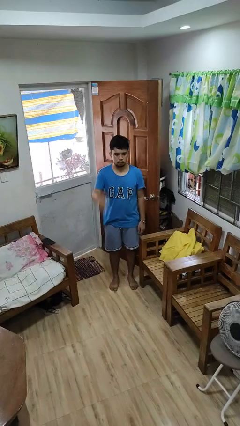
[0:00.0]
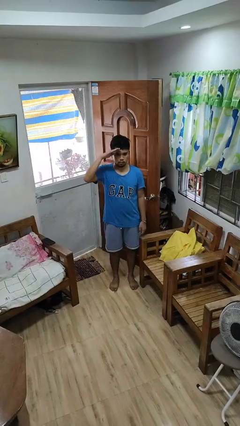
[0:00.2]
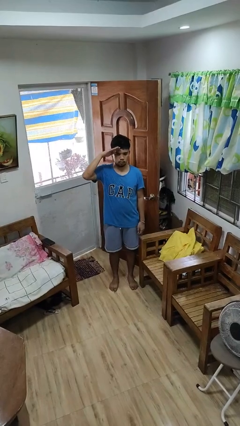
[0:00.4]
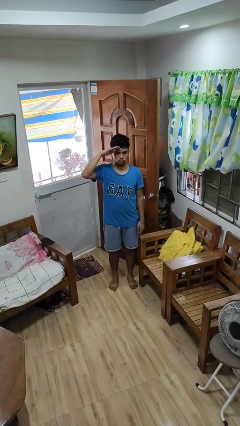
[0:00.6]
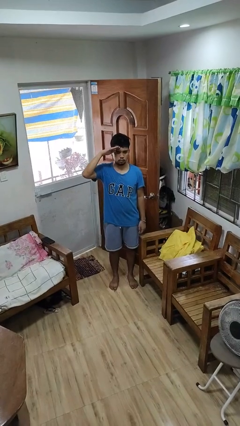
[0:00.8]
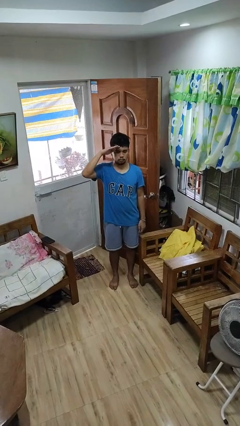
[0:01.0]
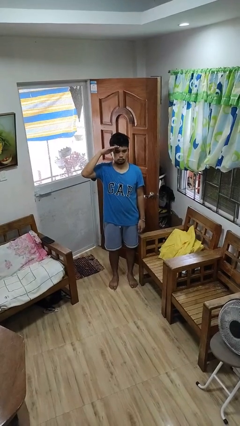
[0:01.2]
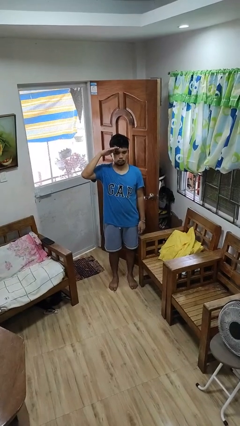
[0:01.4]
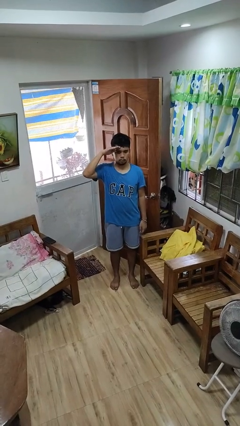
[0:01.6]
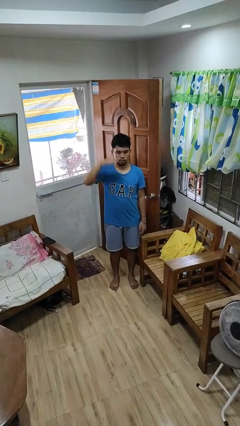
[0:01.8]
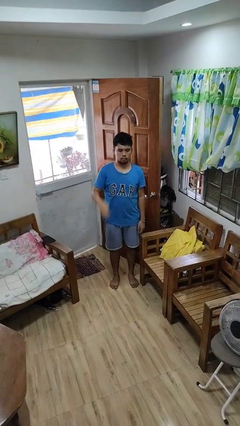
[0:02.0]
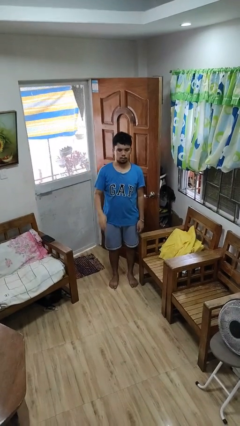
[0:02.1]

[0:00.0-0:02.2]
person salutes

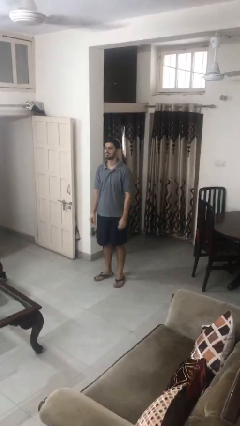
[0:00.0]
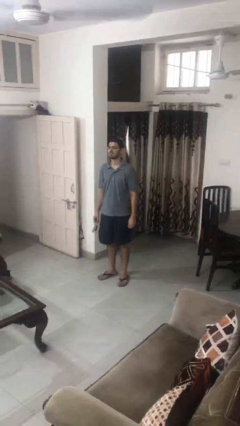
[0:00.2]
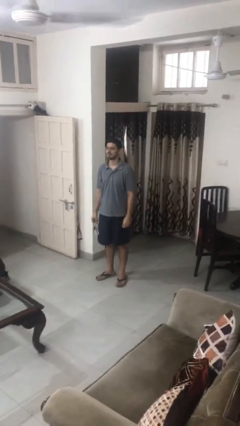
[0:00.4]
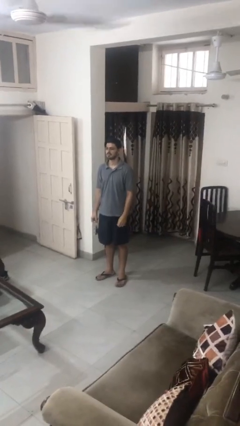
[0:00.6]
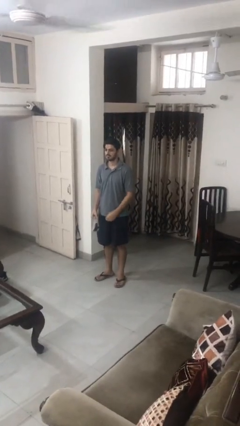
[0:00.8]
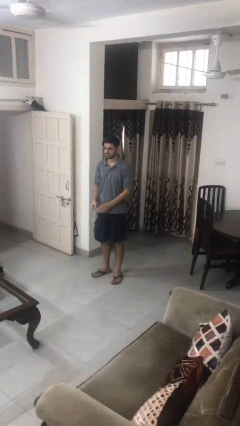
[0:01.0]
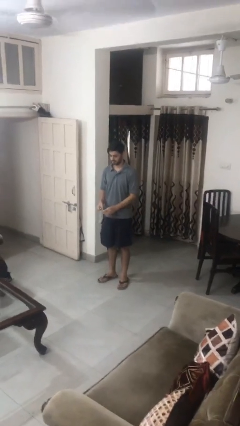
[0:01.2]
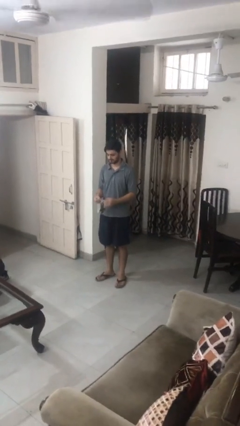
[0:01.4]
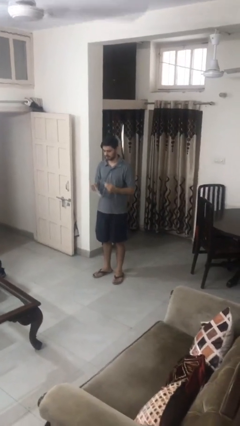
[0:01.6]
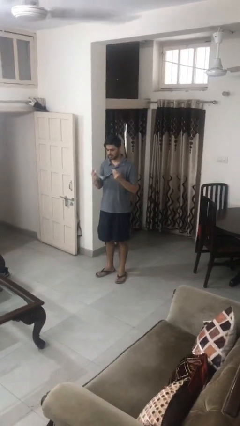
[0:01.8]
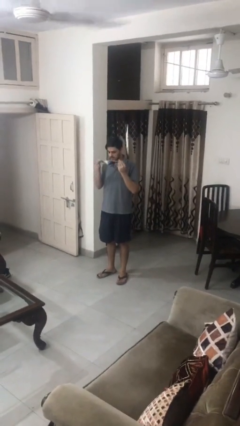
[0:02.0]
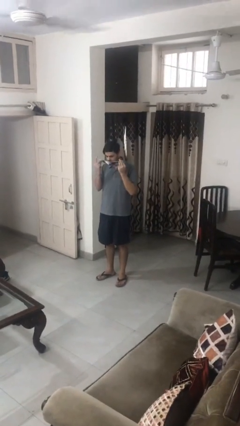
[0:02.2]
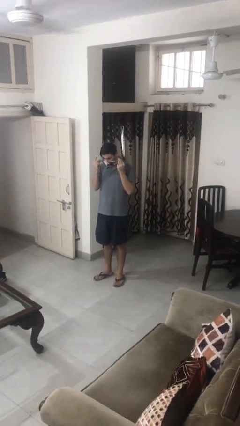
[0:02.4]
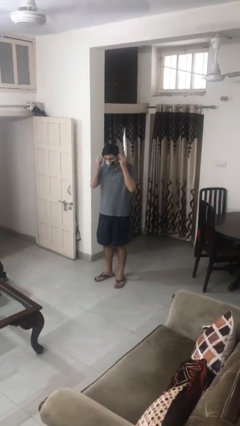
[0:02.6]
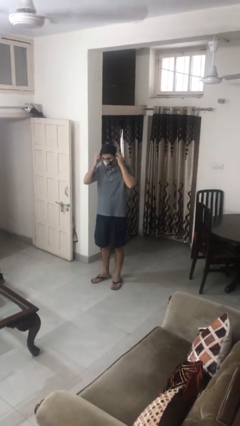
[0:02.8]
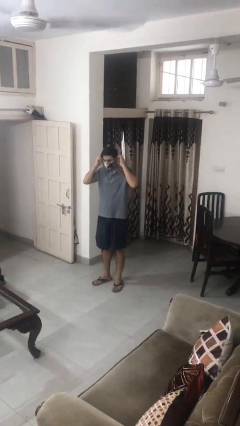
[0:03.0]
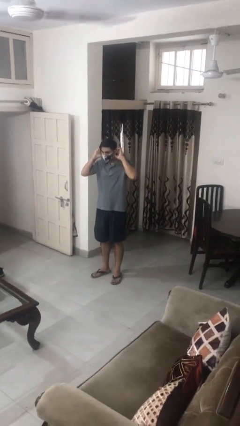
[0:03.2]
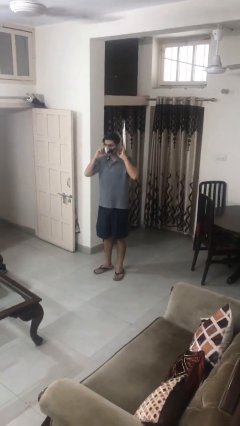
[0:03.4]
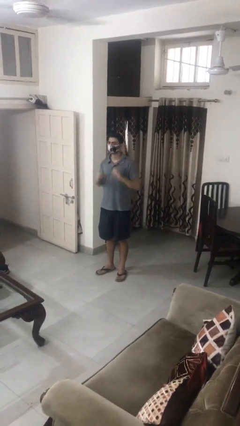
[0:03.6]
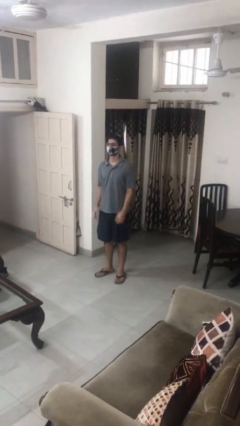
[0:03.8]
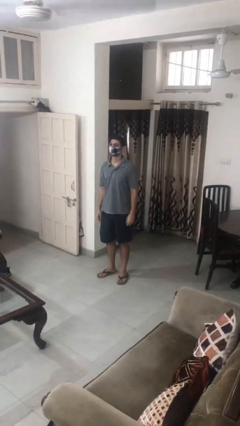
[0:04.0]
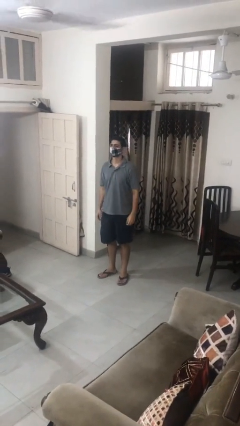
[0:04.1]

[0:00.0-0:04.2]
person puts on facemask

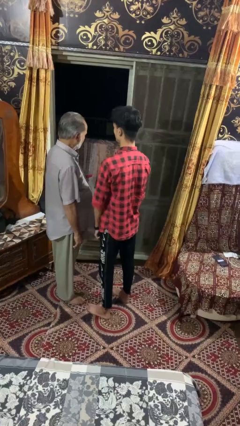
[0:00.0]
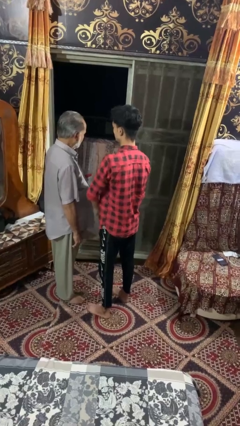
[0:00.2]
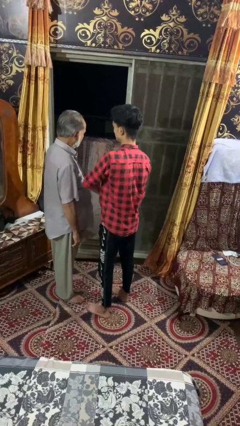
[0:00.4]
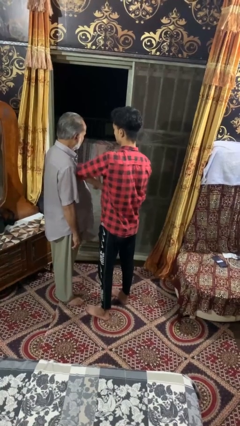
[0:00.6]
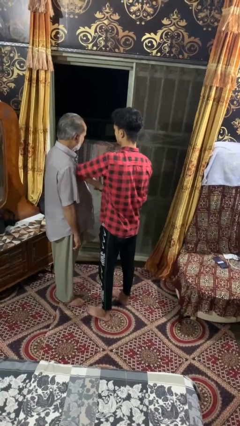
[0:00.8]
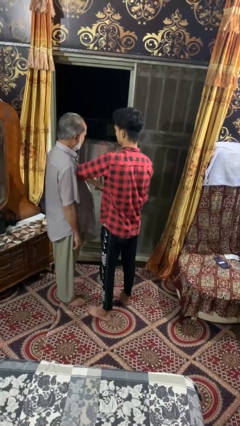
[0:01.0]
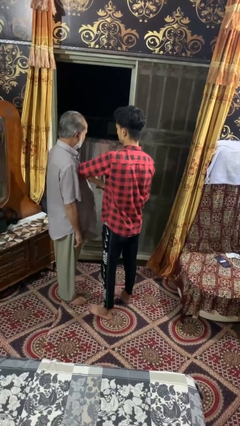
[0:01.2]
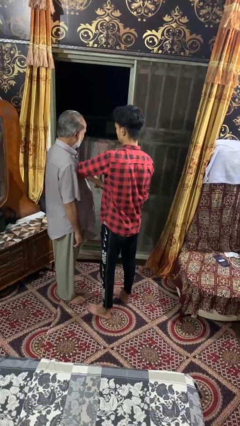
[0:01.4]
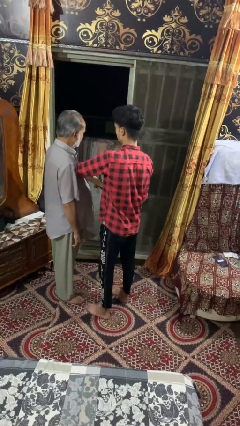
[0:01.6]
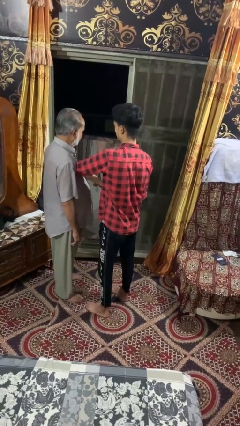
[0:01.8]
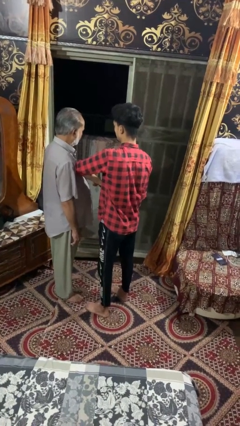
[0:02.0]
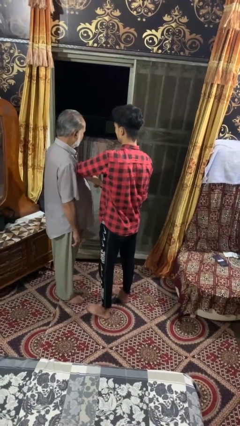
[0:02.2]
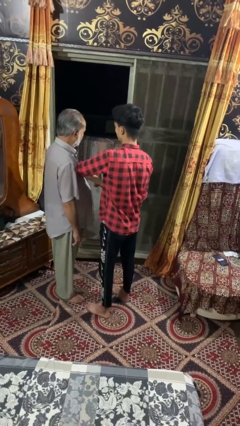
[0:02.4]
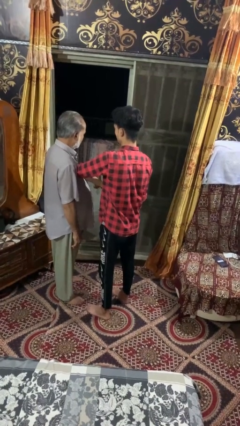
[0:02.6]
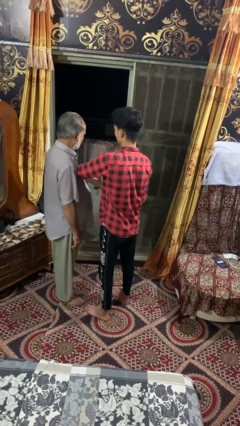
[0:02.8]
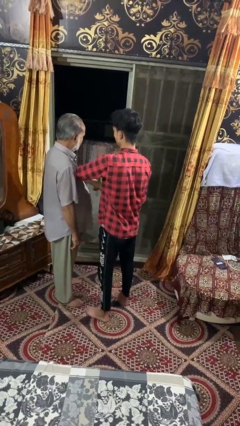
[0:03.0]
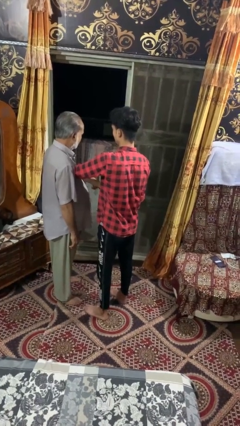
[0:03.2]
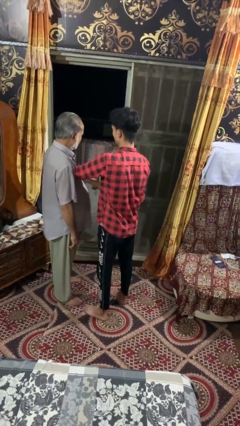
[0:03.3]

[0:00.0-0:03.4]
person nudges person with elbow

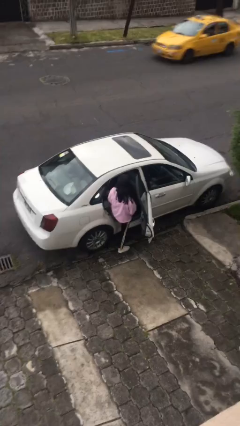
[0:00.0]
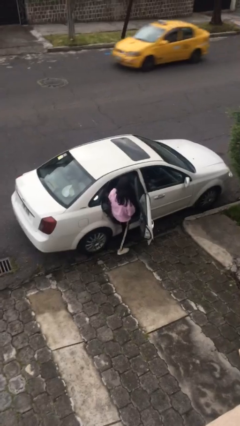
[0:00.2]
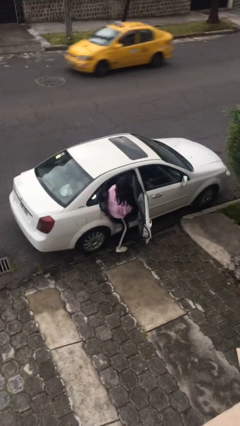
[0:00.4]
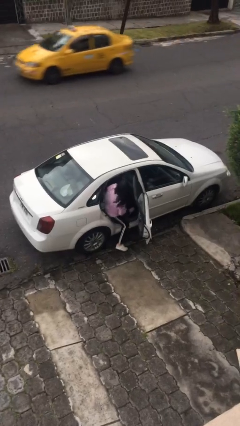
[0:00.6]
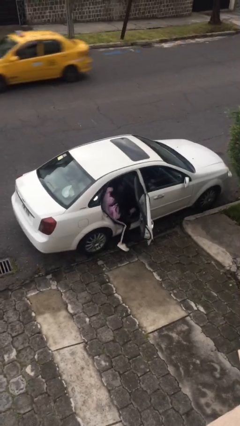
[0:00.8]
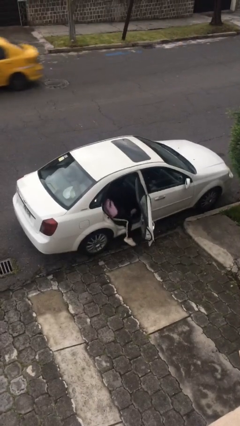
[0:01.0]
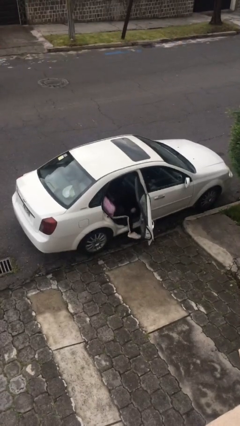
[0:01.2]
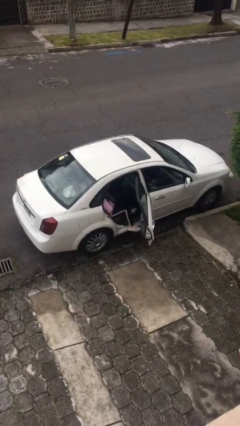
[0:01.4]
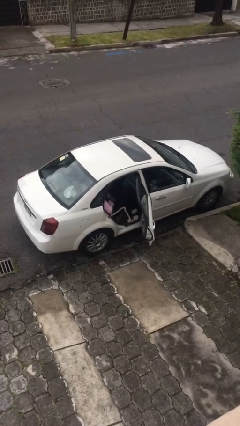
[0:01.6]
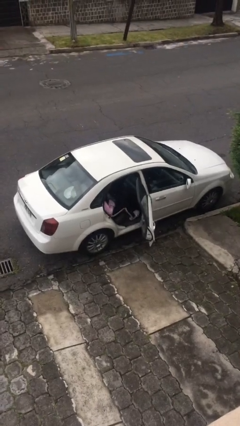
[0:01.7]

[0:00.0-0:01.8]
person enters car

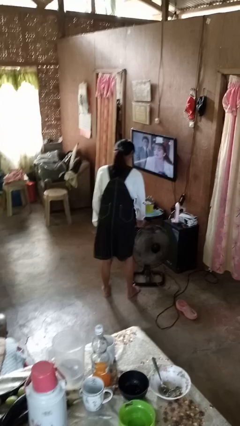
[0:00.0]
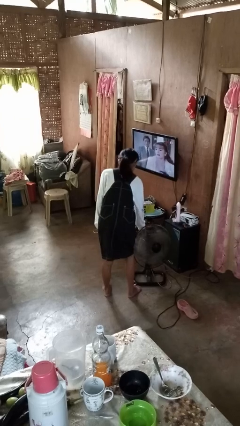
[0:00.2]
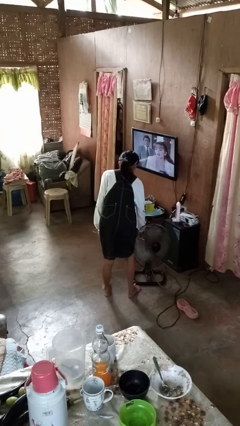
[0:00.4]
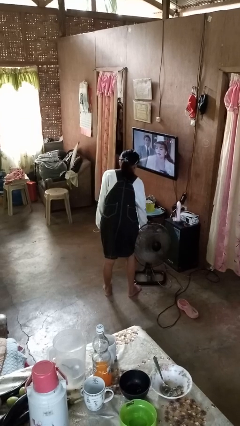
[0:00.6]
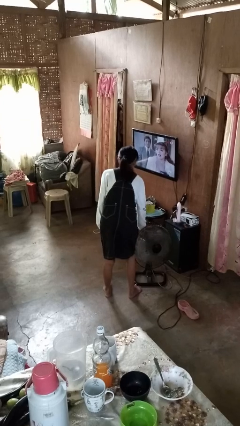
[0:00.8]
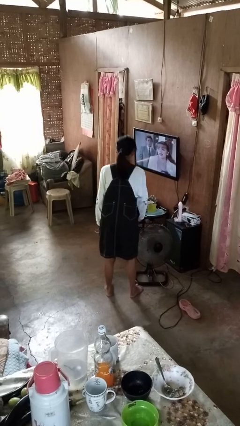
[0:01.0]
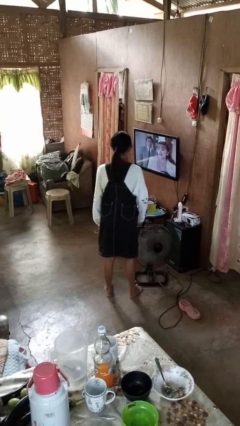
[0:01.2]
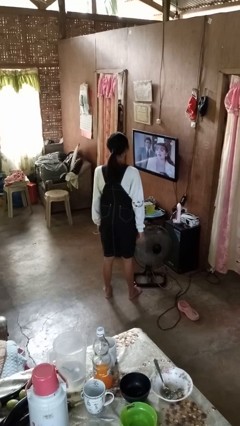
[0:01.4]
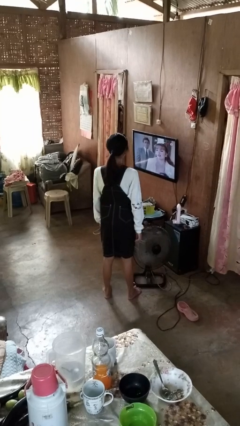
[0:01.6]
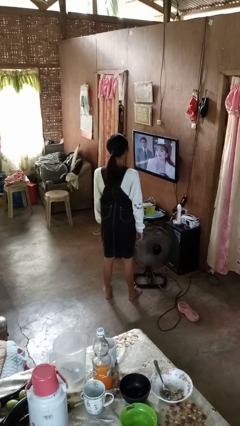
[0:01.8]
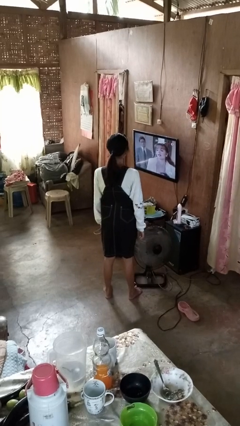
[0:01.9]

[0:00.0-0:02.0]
person turns on fan

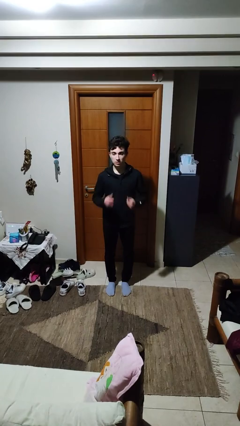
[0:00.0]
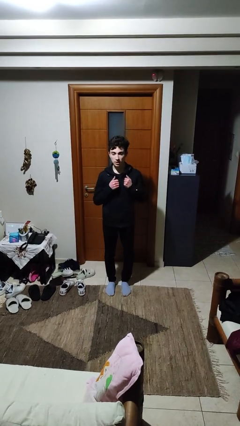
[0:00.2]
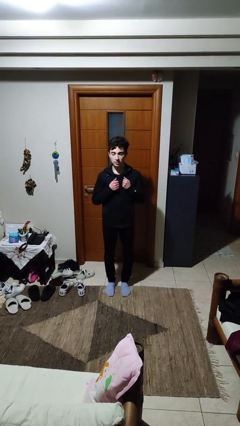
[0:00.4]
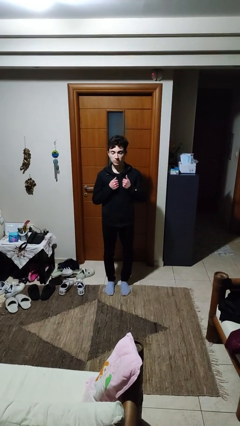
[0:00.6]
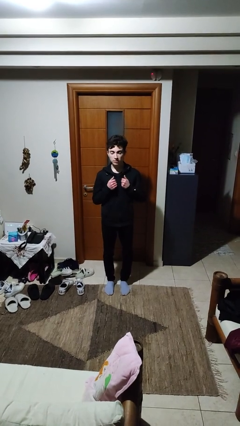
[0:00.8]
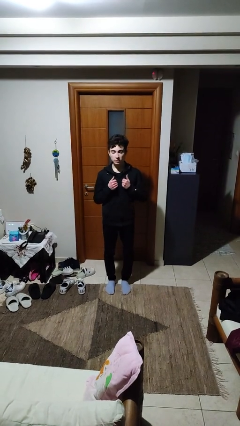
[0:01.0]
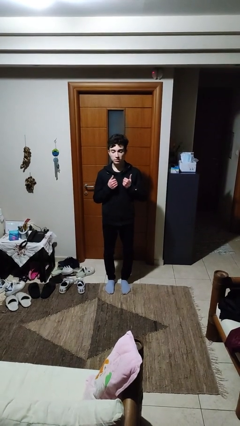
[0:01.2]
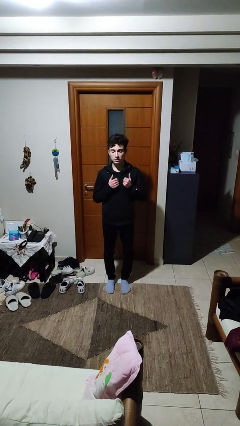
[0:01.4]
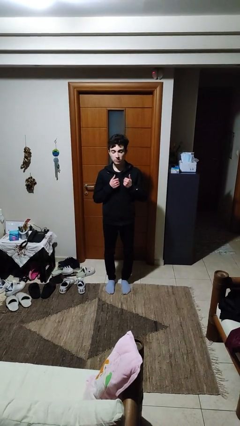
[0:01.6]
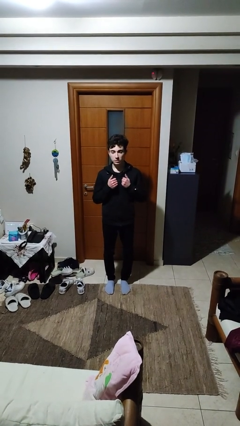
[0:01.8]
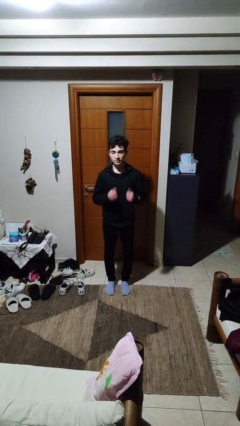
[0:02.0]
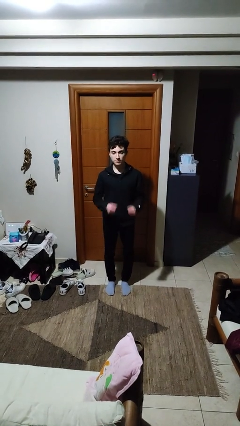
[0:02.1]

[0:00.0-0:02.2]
person drums on chest

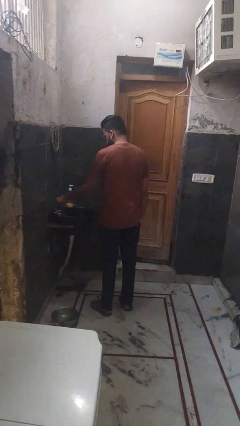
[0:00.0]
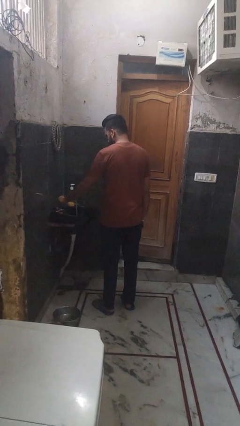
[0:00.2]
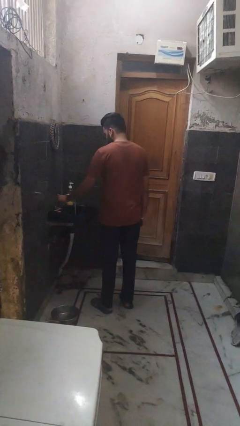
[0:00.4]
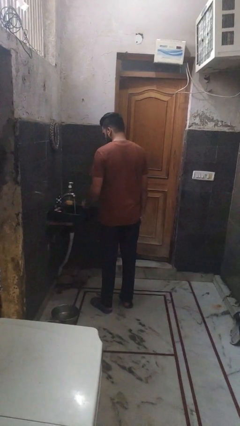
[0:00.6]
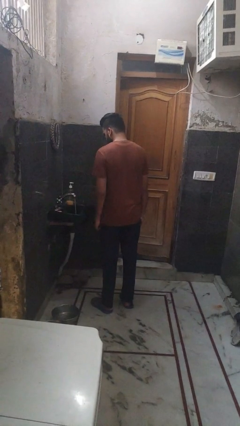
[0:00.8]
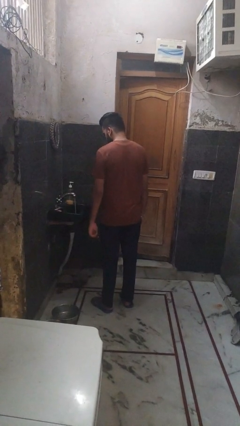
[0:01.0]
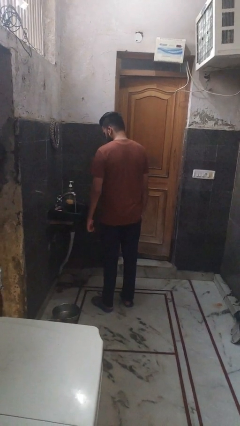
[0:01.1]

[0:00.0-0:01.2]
person turns on faucet

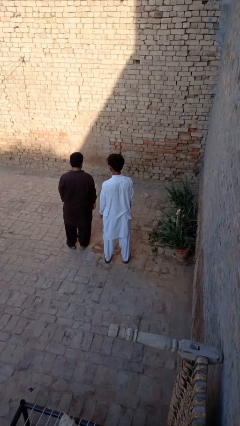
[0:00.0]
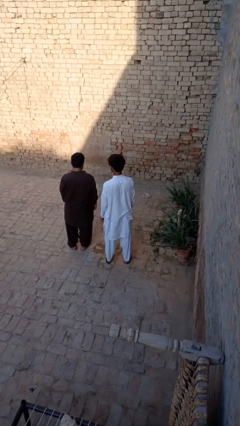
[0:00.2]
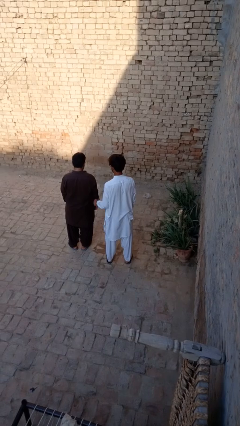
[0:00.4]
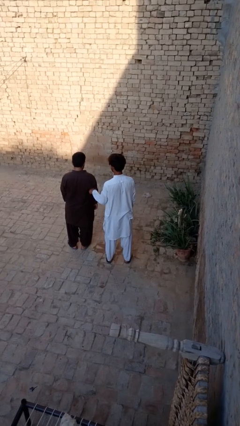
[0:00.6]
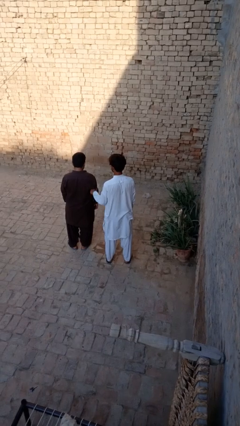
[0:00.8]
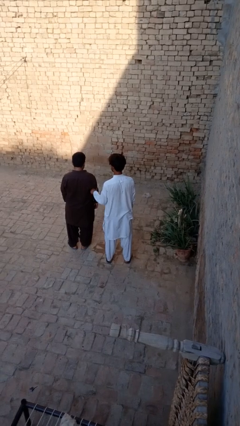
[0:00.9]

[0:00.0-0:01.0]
person tickles person
